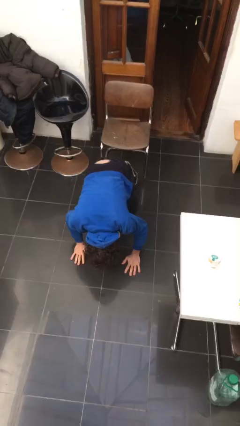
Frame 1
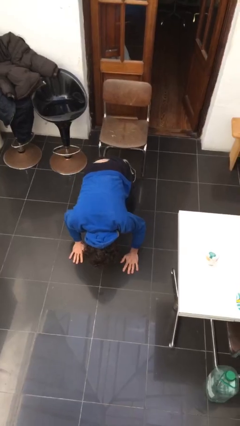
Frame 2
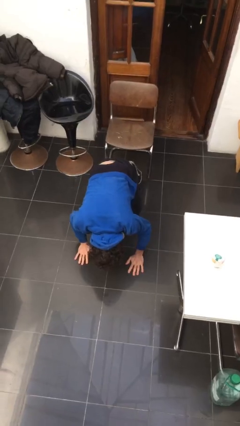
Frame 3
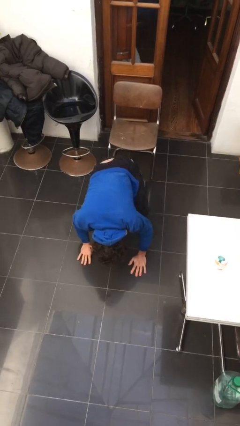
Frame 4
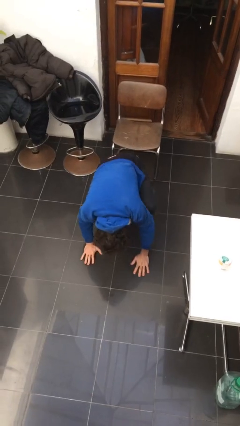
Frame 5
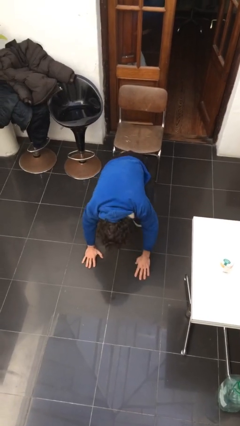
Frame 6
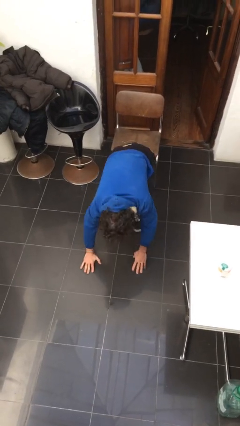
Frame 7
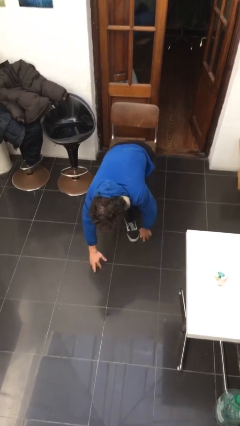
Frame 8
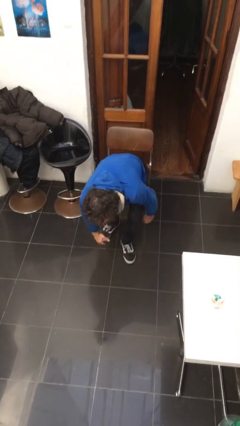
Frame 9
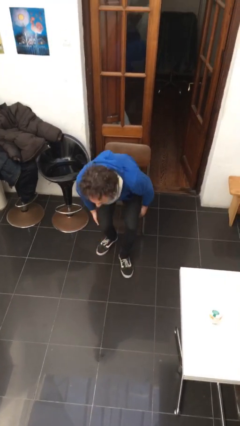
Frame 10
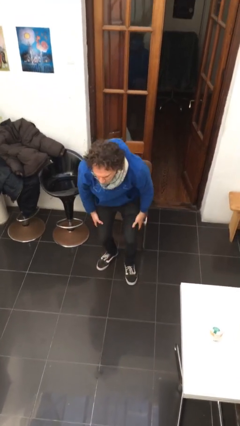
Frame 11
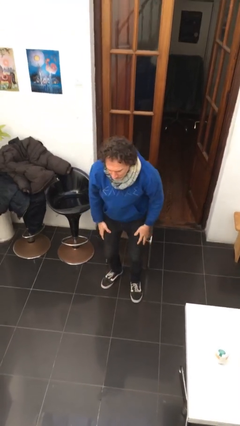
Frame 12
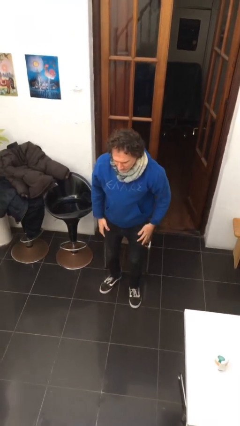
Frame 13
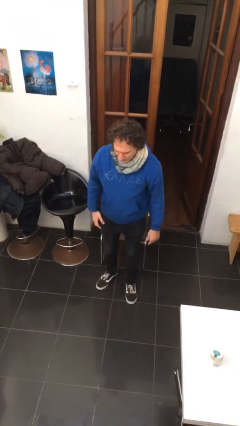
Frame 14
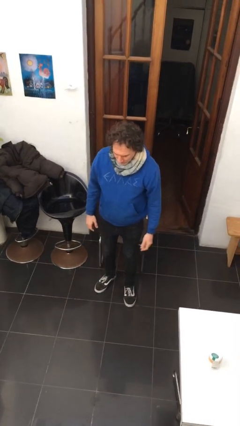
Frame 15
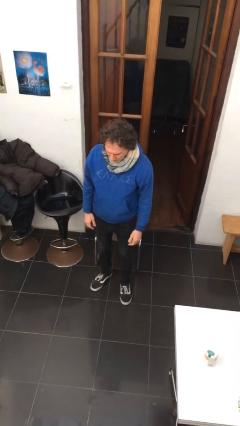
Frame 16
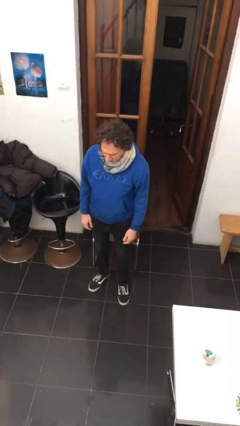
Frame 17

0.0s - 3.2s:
person stands up from floor

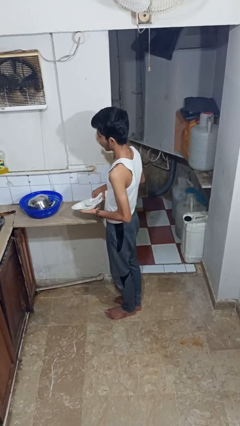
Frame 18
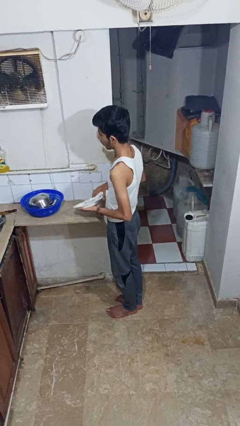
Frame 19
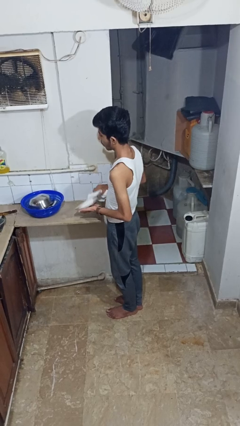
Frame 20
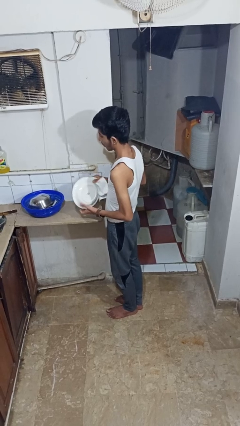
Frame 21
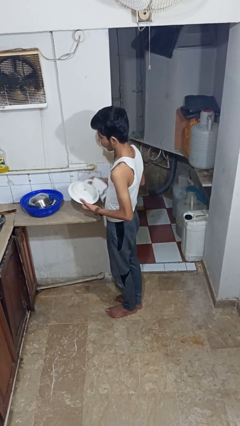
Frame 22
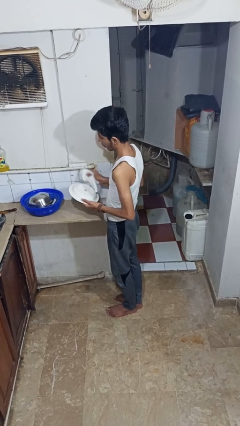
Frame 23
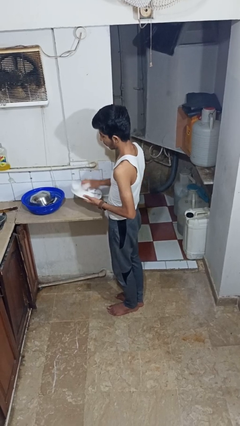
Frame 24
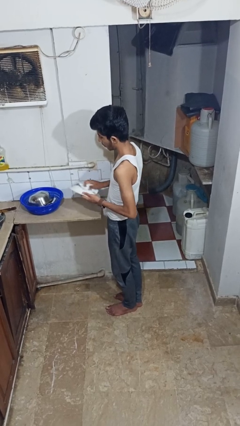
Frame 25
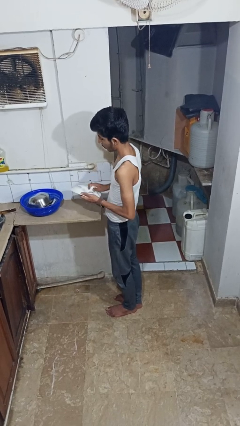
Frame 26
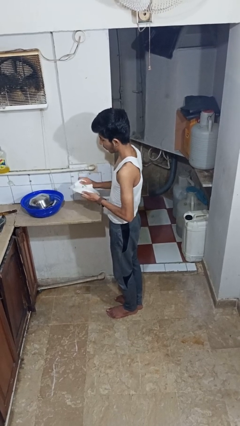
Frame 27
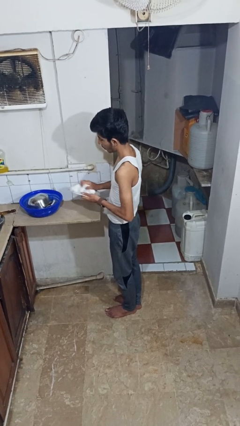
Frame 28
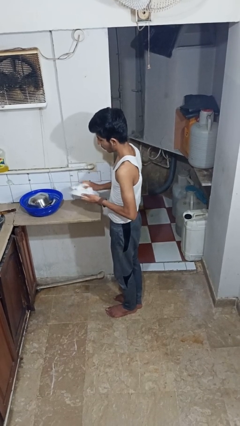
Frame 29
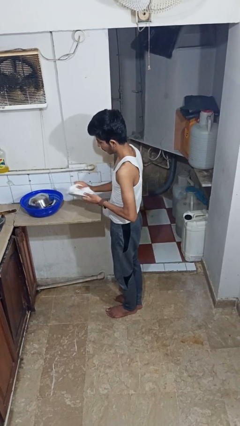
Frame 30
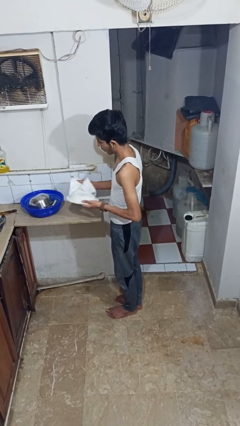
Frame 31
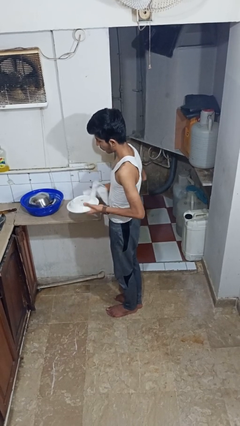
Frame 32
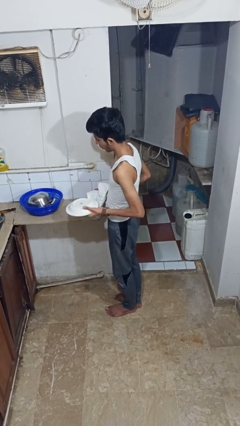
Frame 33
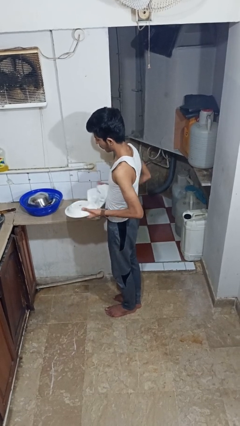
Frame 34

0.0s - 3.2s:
person dries dish

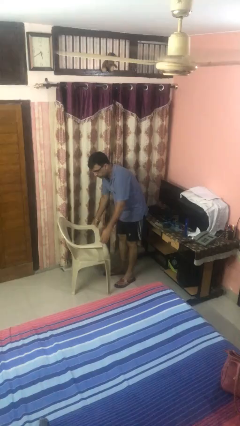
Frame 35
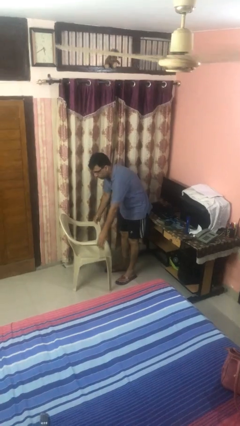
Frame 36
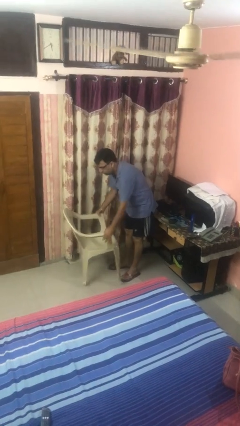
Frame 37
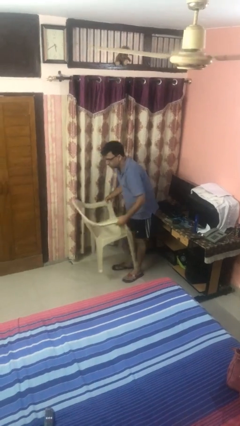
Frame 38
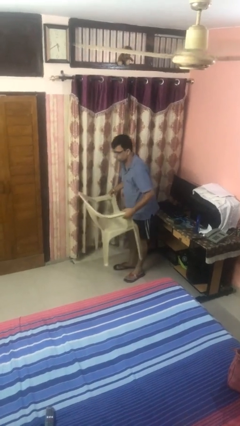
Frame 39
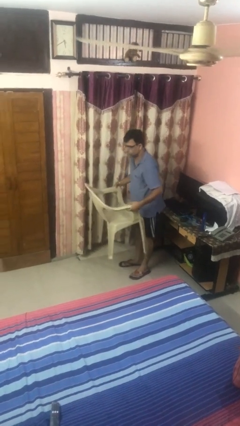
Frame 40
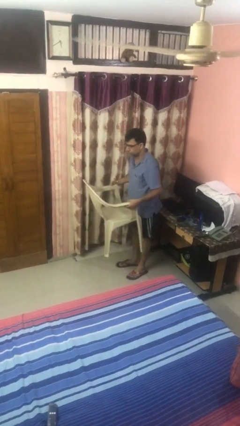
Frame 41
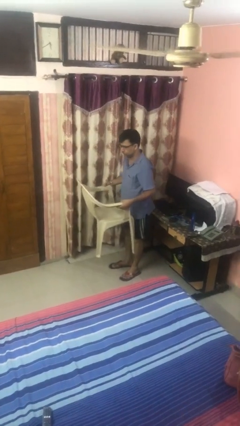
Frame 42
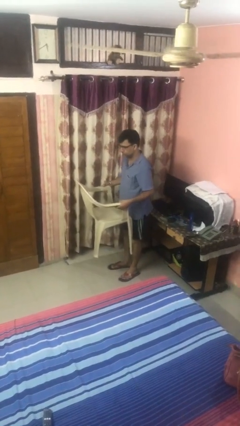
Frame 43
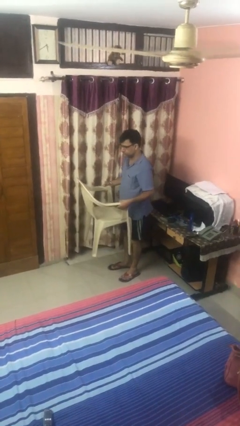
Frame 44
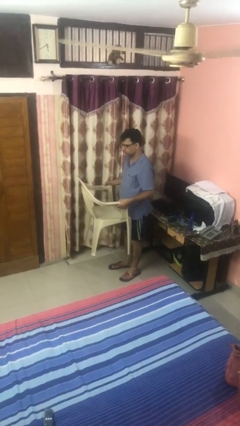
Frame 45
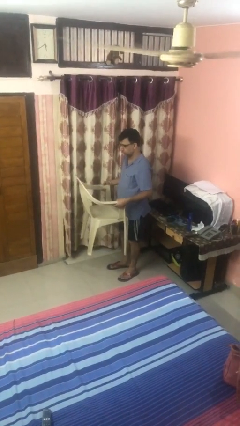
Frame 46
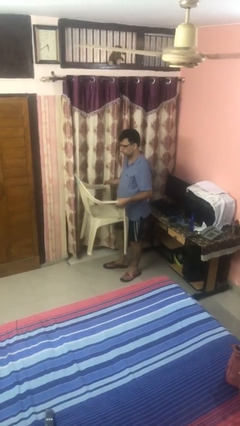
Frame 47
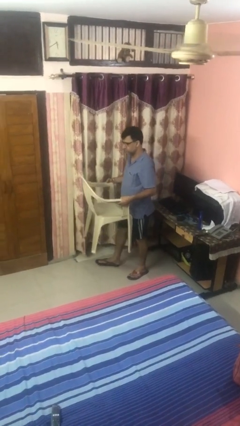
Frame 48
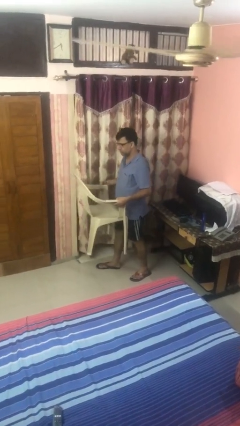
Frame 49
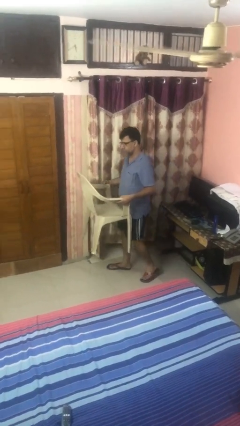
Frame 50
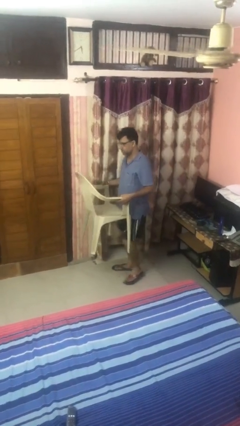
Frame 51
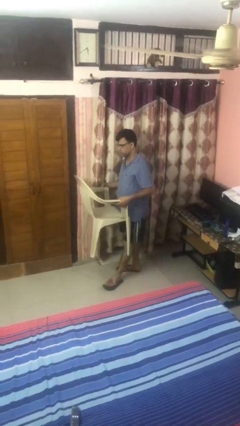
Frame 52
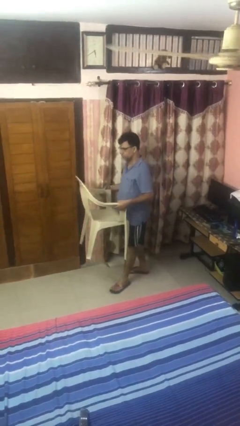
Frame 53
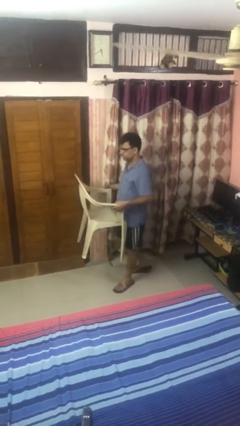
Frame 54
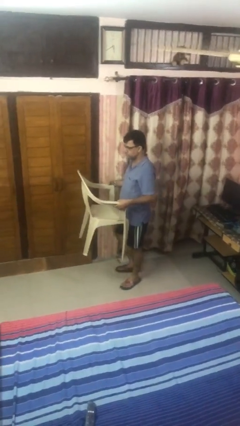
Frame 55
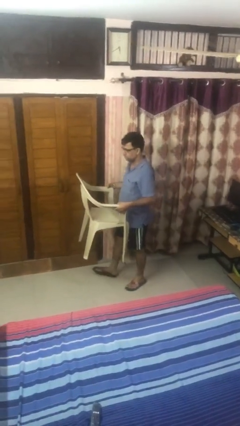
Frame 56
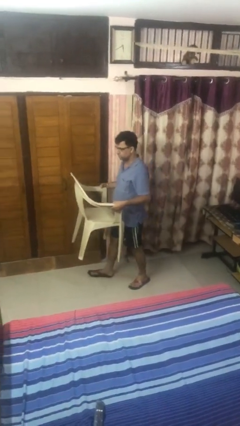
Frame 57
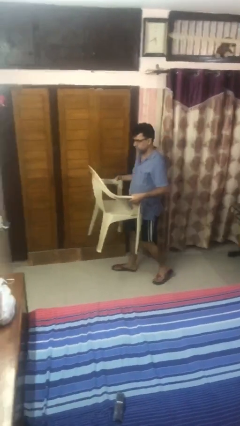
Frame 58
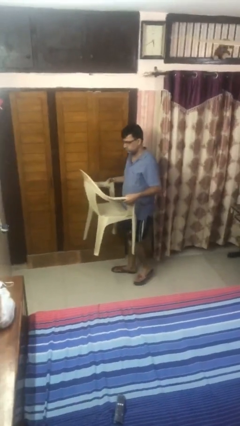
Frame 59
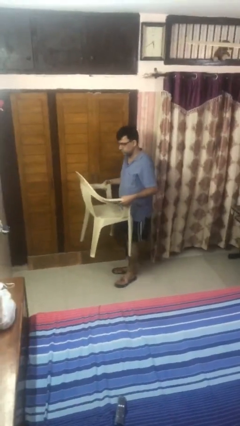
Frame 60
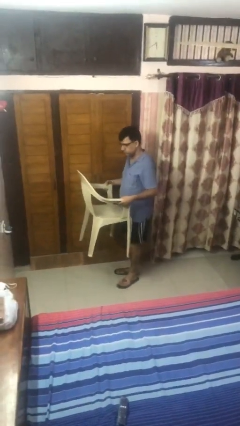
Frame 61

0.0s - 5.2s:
person carries furniture

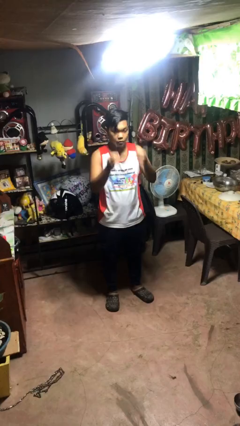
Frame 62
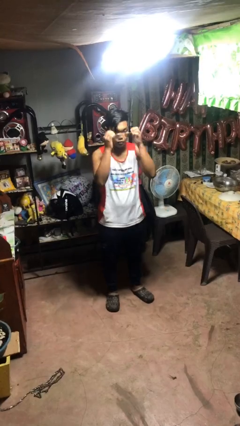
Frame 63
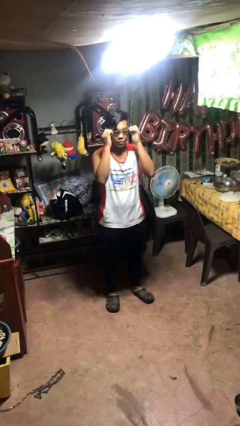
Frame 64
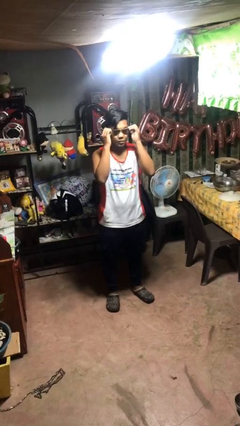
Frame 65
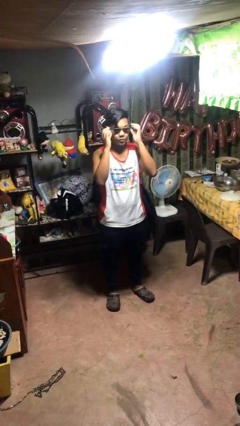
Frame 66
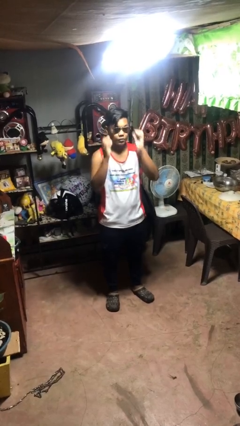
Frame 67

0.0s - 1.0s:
person puts on sunglasses

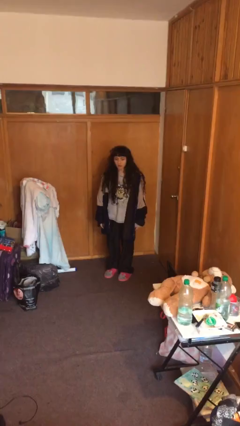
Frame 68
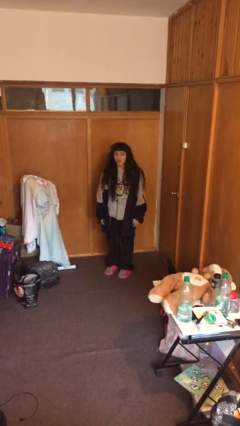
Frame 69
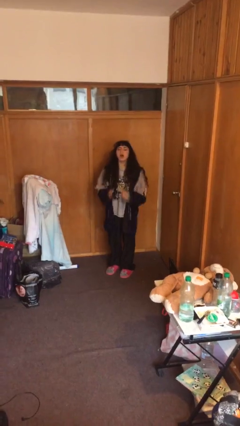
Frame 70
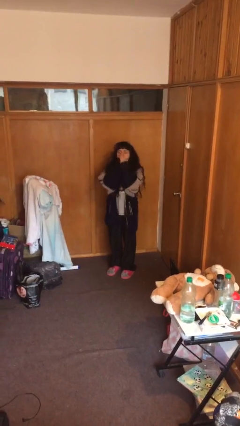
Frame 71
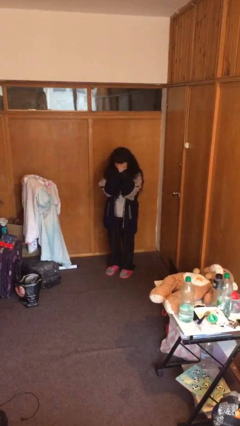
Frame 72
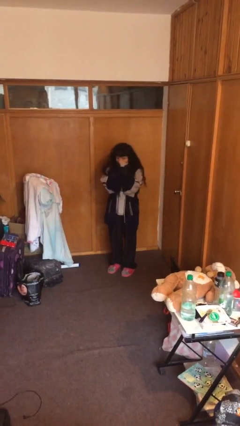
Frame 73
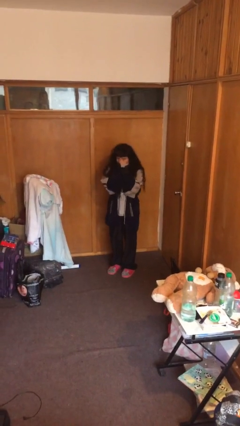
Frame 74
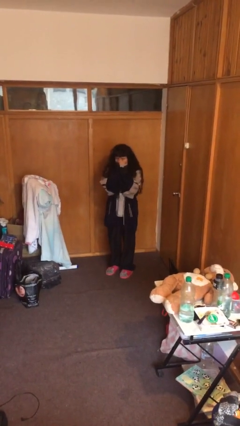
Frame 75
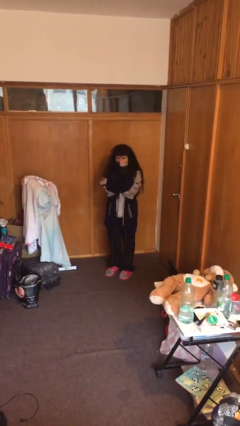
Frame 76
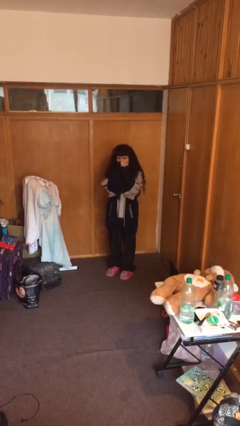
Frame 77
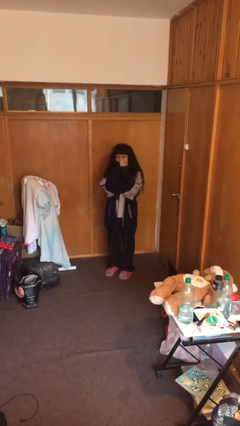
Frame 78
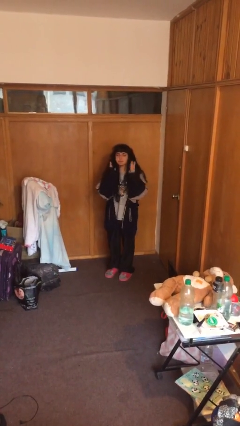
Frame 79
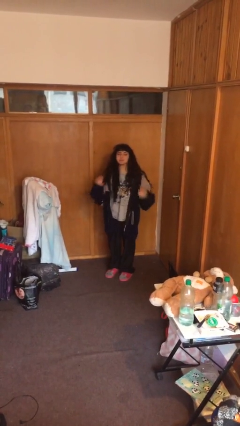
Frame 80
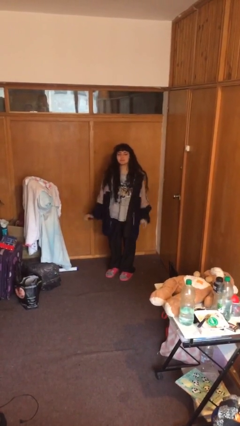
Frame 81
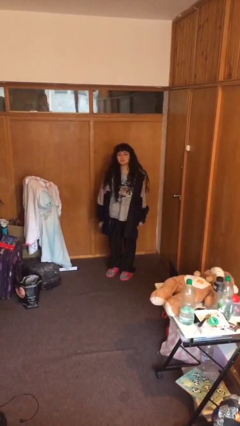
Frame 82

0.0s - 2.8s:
person sneezes into hand

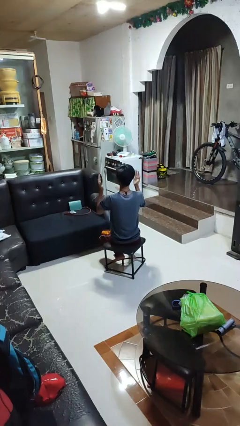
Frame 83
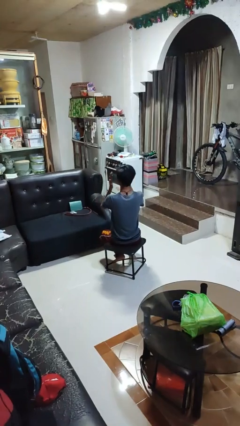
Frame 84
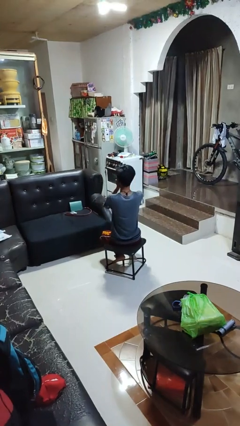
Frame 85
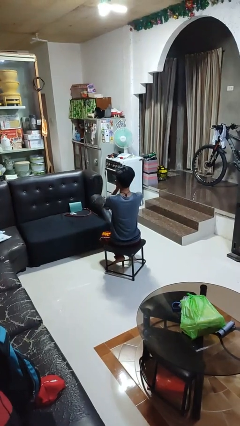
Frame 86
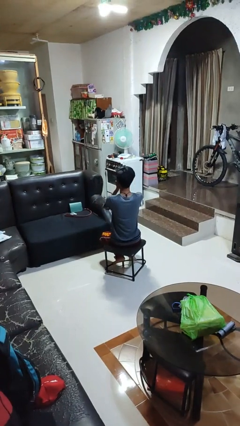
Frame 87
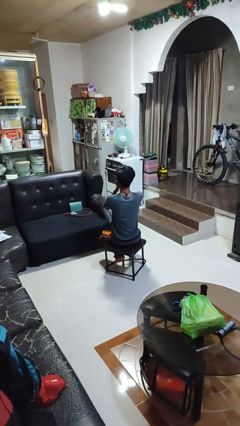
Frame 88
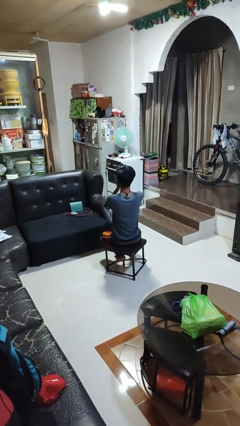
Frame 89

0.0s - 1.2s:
person covers face with hands

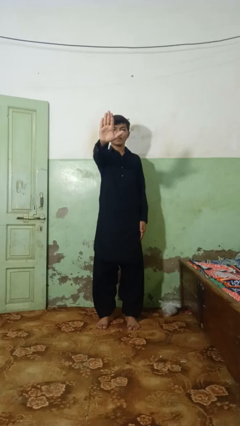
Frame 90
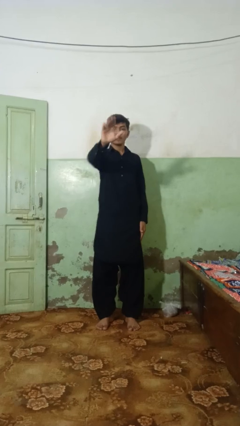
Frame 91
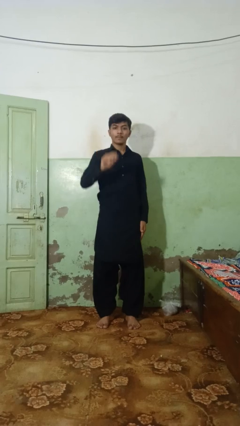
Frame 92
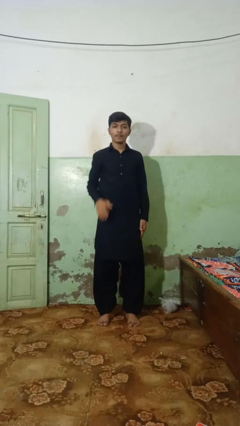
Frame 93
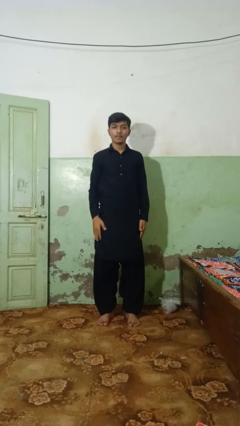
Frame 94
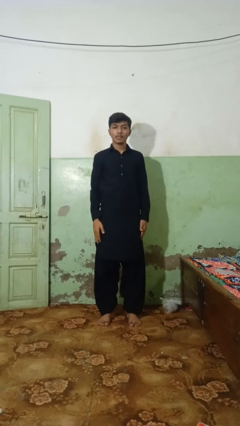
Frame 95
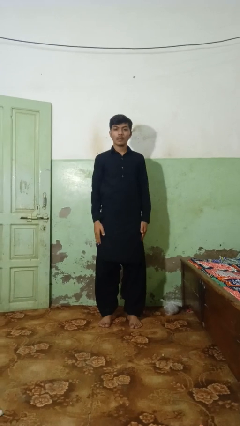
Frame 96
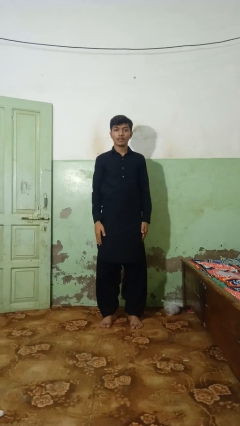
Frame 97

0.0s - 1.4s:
person gestures stop
